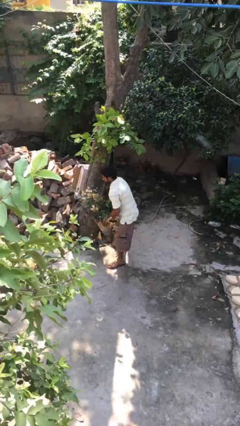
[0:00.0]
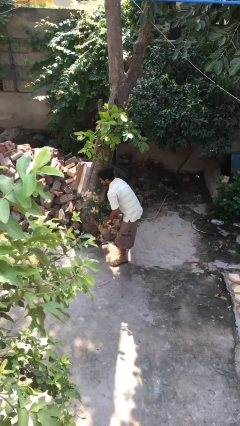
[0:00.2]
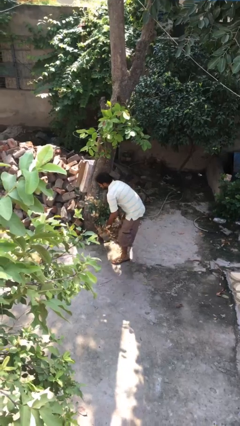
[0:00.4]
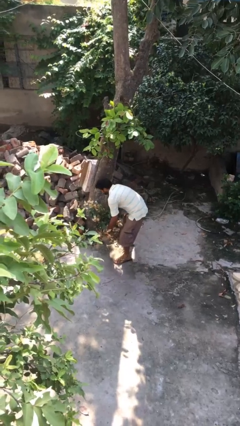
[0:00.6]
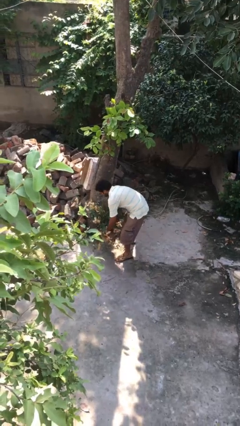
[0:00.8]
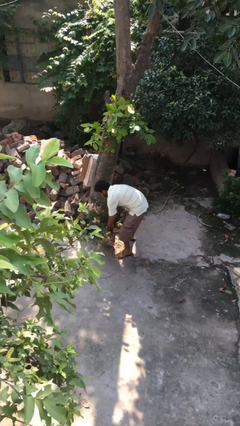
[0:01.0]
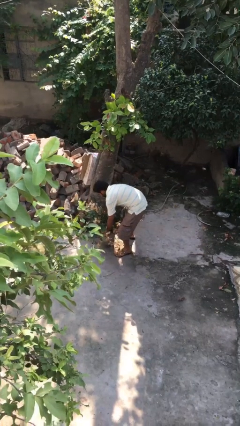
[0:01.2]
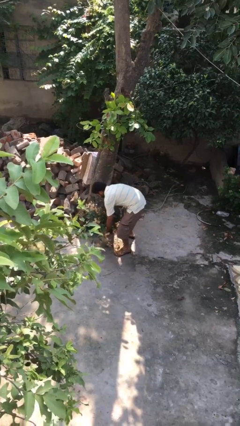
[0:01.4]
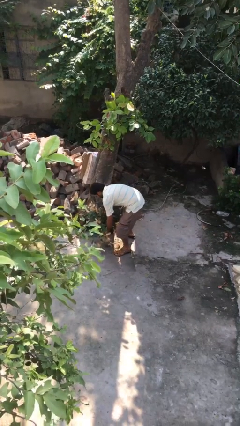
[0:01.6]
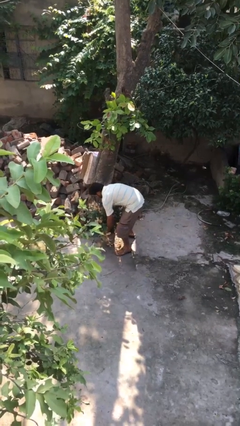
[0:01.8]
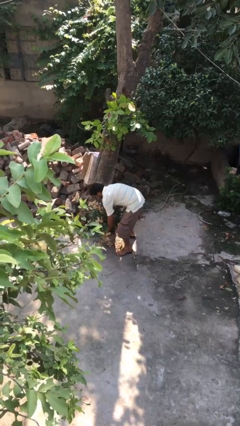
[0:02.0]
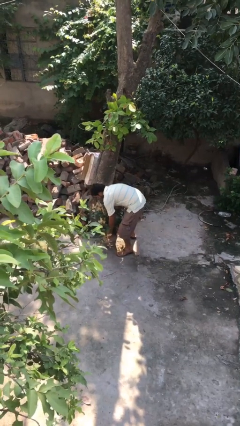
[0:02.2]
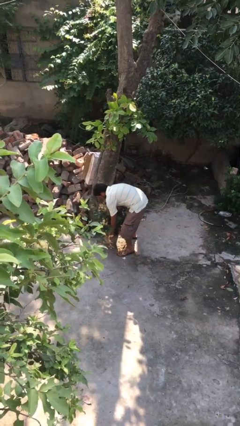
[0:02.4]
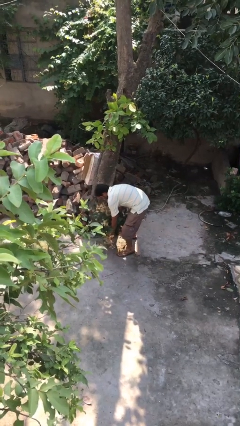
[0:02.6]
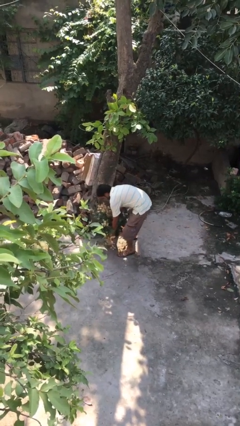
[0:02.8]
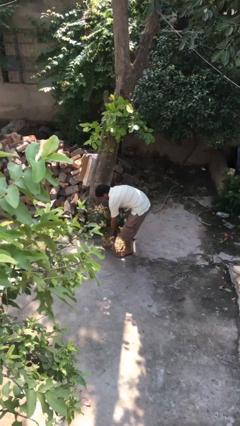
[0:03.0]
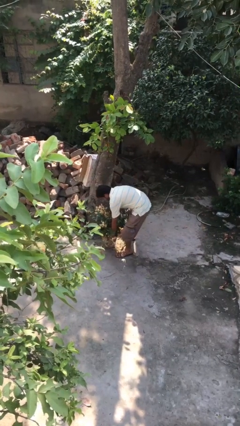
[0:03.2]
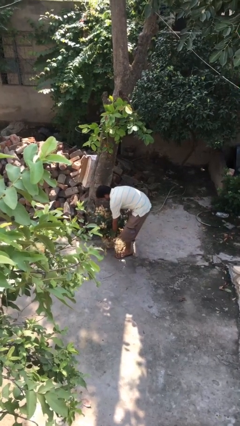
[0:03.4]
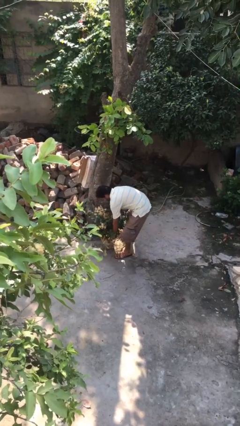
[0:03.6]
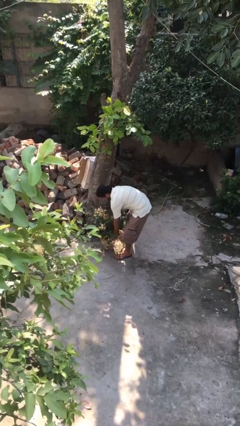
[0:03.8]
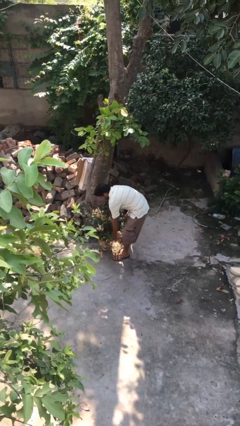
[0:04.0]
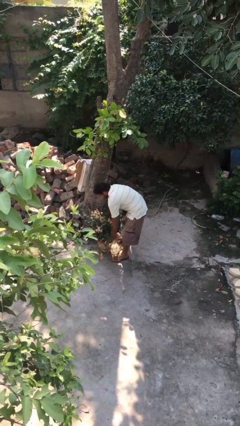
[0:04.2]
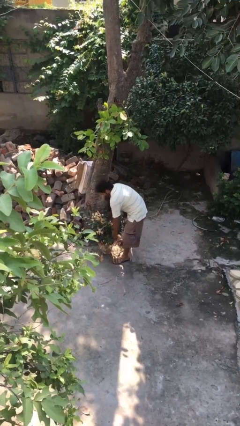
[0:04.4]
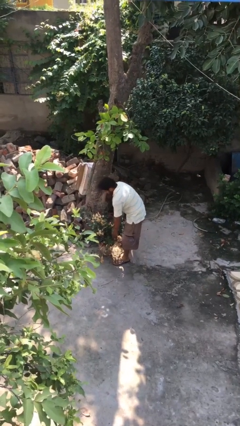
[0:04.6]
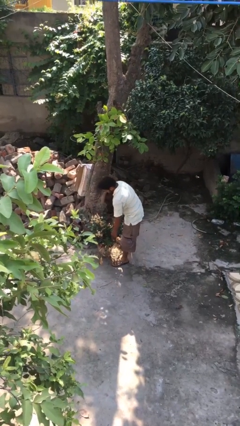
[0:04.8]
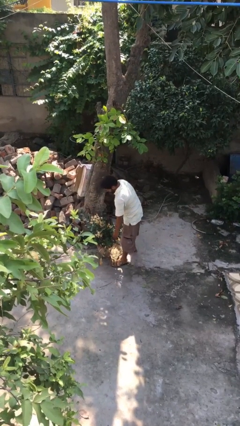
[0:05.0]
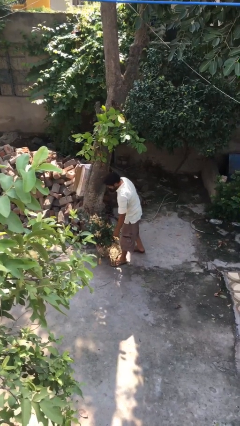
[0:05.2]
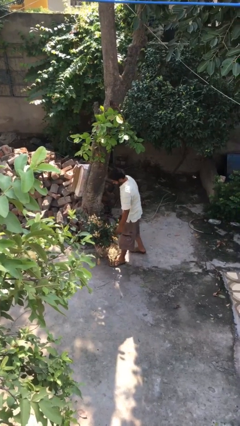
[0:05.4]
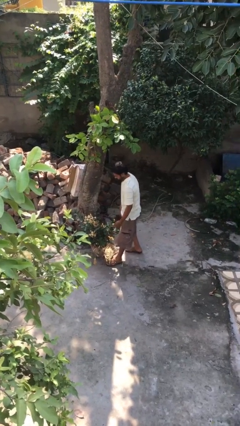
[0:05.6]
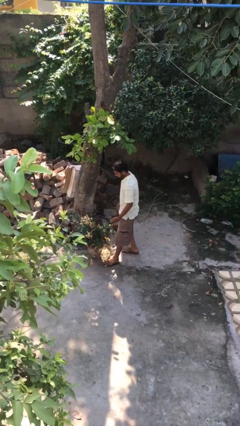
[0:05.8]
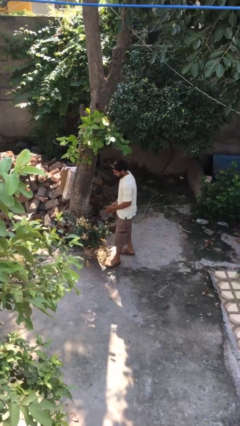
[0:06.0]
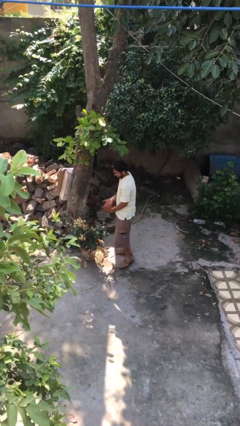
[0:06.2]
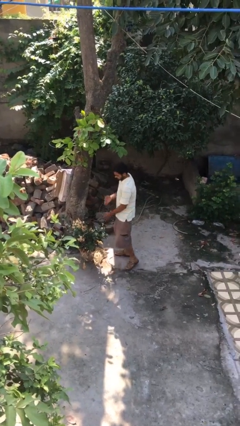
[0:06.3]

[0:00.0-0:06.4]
person puts down object on floor

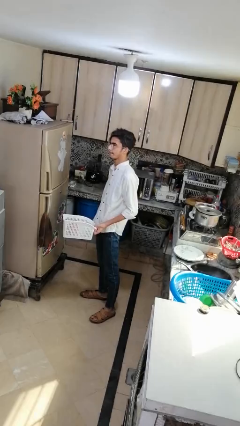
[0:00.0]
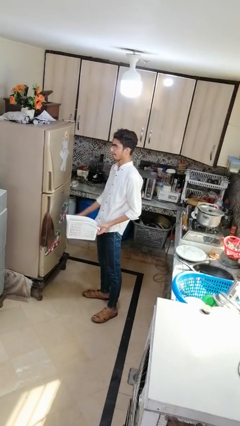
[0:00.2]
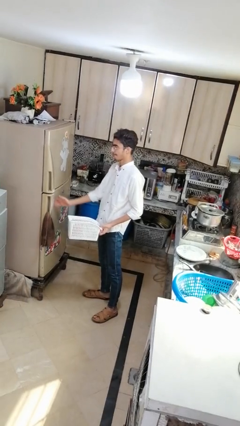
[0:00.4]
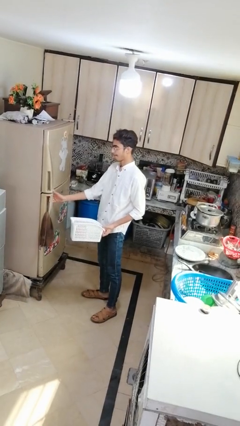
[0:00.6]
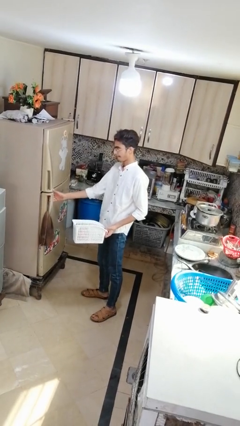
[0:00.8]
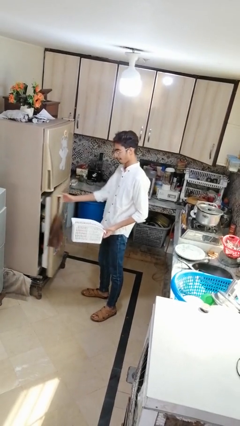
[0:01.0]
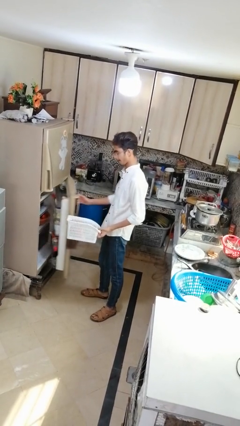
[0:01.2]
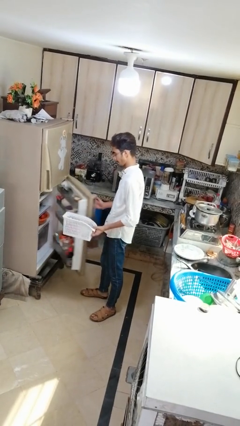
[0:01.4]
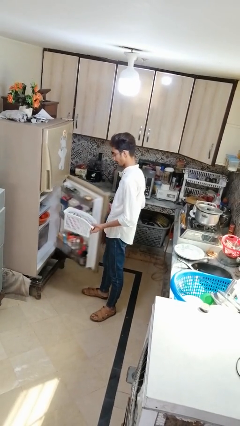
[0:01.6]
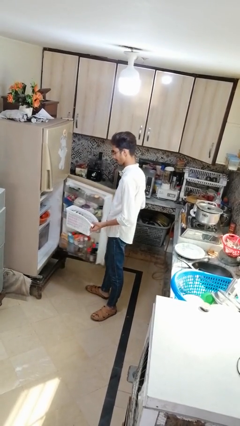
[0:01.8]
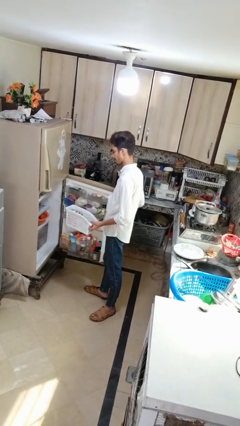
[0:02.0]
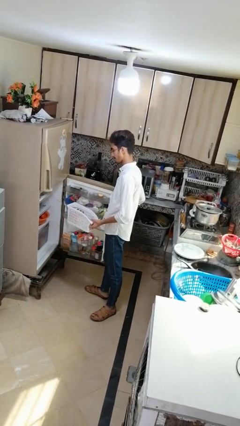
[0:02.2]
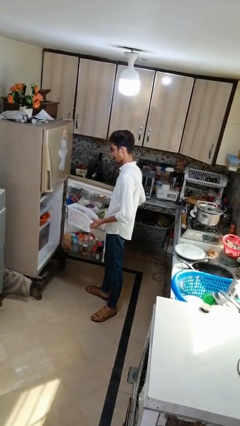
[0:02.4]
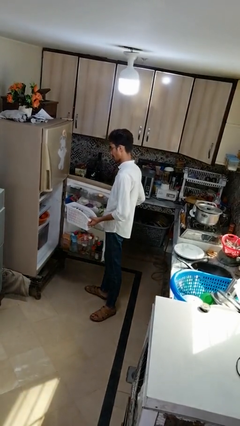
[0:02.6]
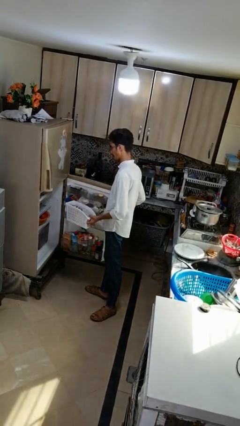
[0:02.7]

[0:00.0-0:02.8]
person opens refrigerator

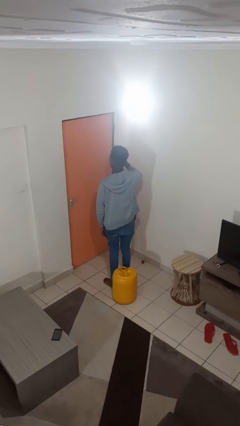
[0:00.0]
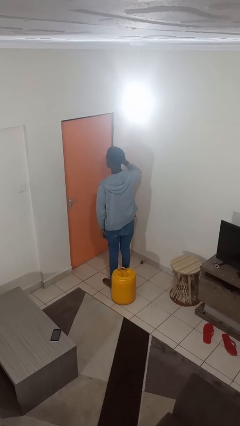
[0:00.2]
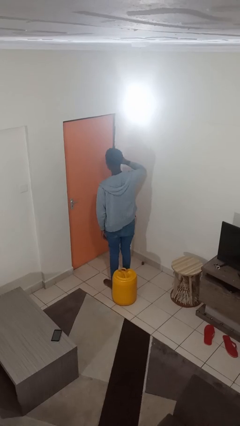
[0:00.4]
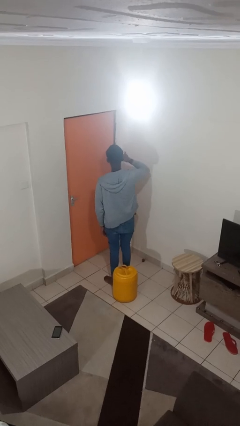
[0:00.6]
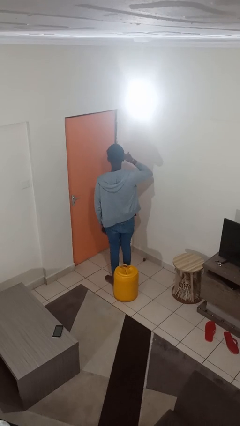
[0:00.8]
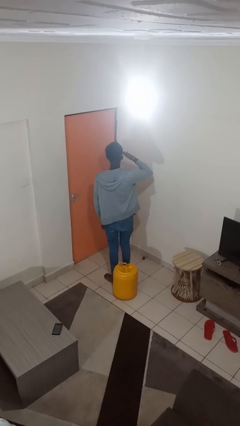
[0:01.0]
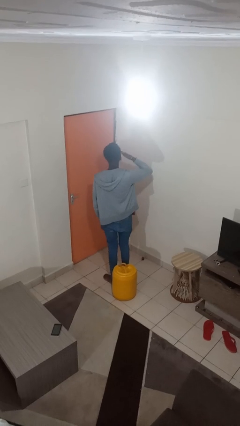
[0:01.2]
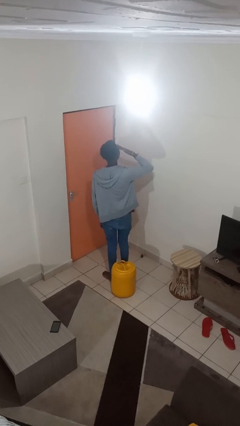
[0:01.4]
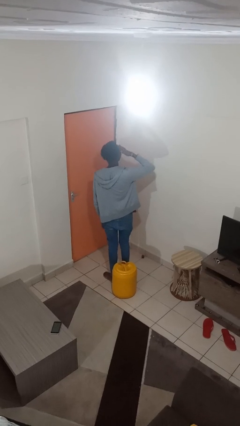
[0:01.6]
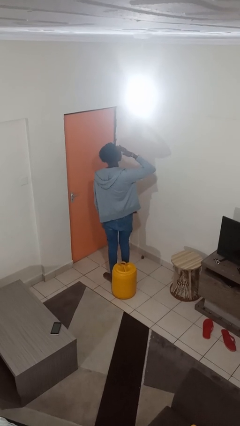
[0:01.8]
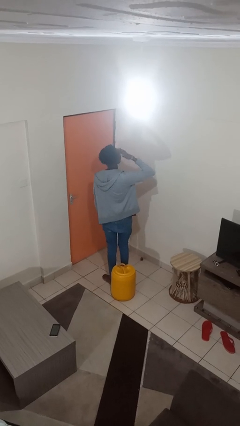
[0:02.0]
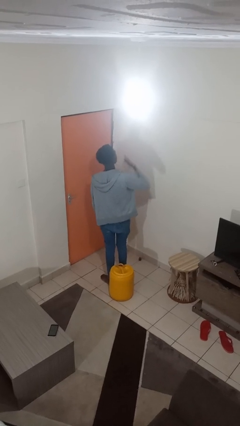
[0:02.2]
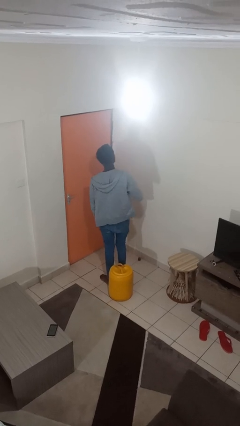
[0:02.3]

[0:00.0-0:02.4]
person rubs eyes

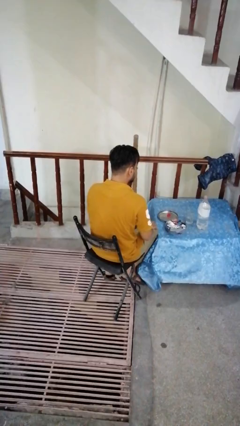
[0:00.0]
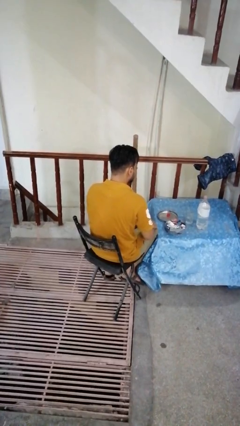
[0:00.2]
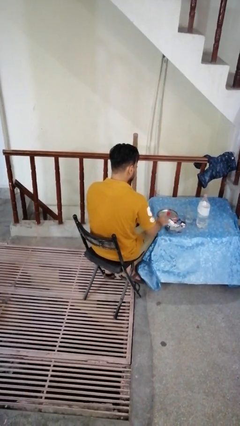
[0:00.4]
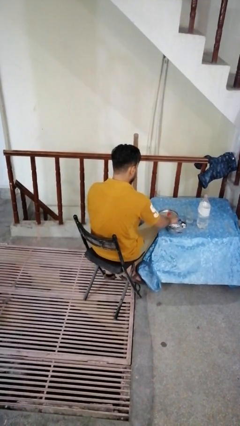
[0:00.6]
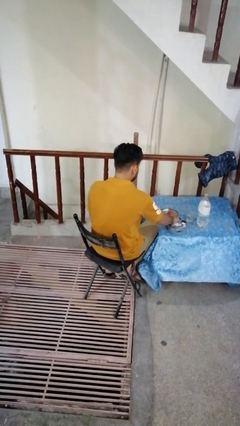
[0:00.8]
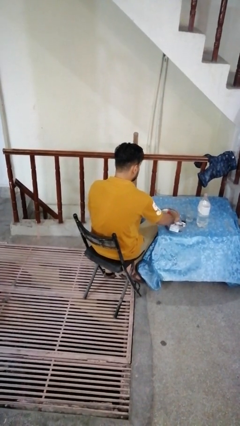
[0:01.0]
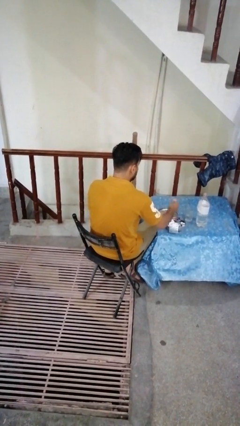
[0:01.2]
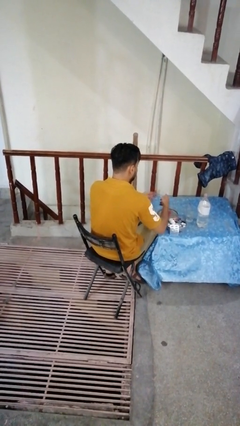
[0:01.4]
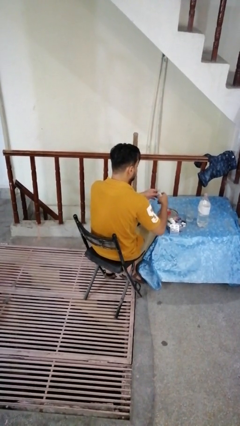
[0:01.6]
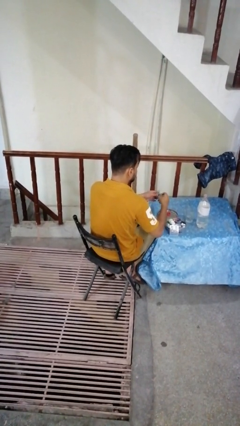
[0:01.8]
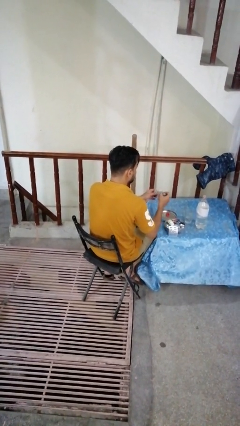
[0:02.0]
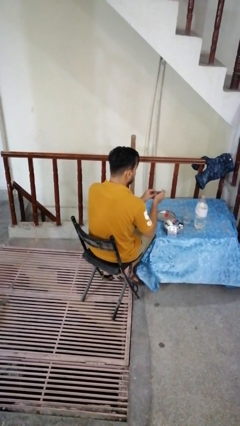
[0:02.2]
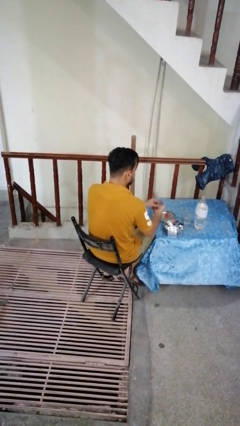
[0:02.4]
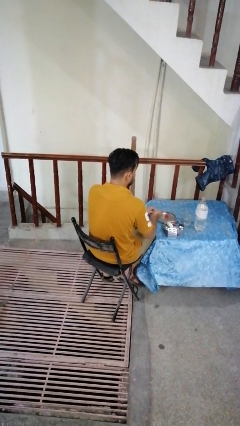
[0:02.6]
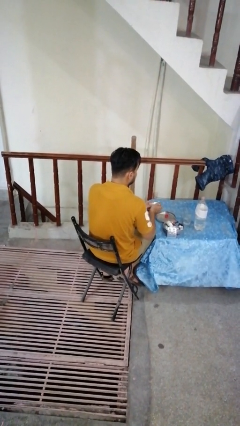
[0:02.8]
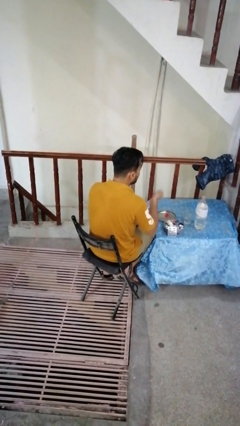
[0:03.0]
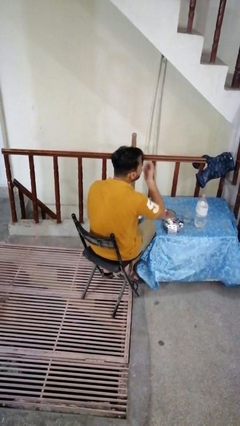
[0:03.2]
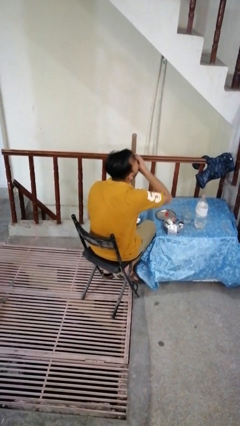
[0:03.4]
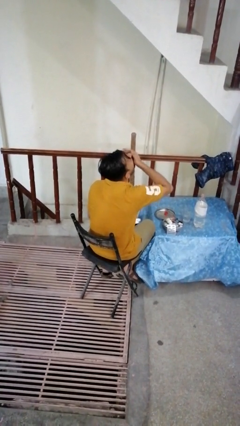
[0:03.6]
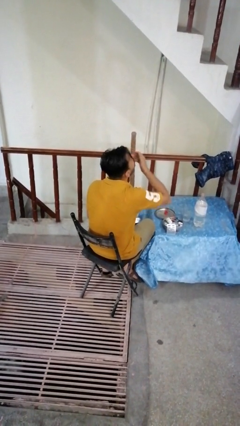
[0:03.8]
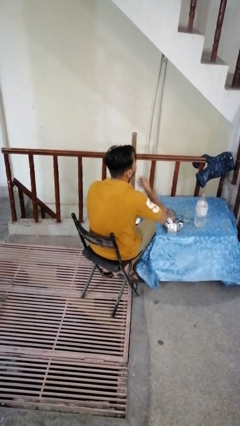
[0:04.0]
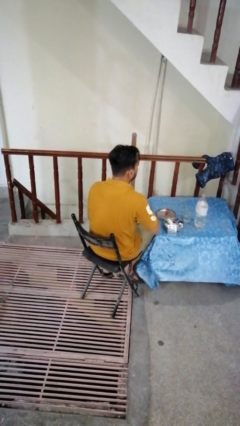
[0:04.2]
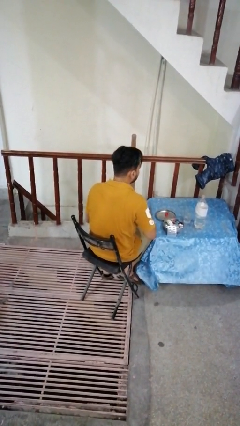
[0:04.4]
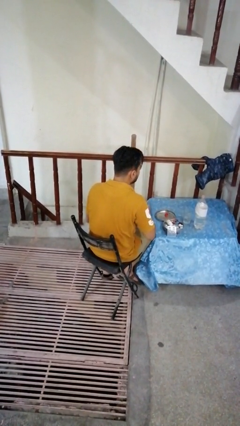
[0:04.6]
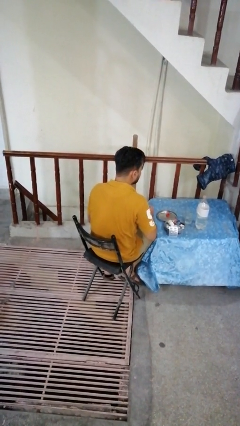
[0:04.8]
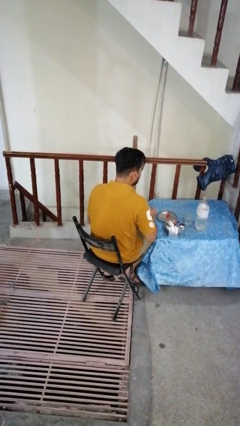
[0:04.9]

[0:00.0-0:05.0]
person takes medicine pills

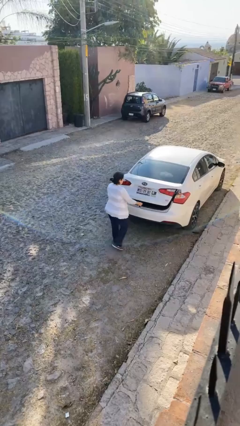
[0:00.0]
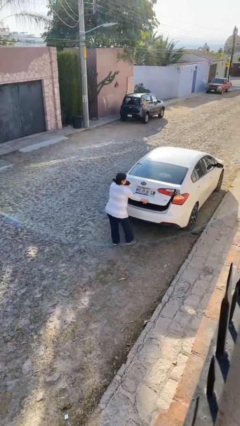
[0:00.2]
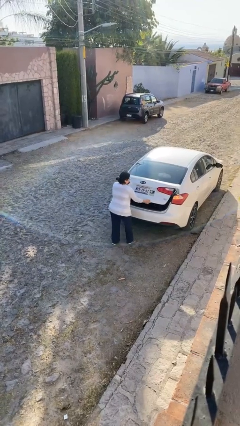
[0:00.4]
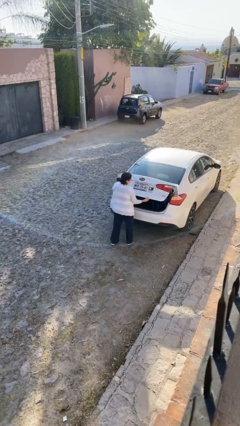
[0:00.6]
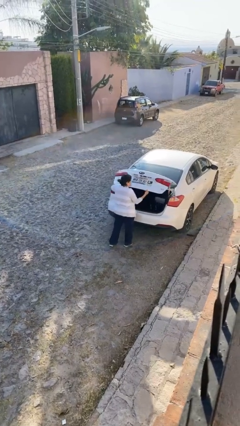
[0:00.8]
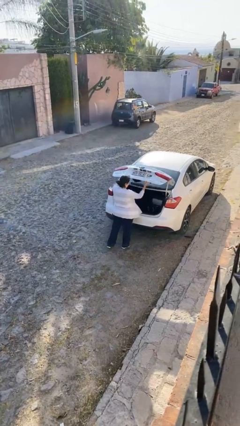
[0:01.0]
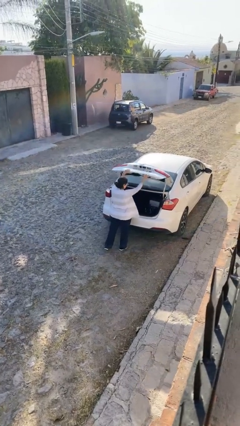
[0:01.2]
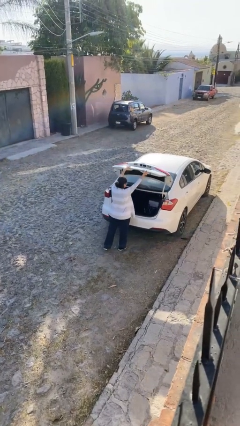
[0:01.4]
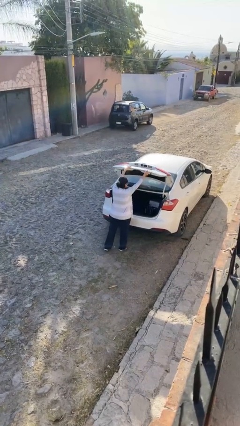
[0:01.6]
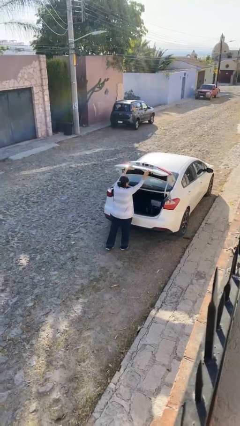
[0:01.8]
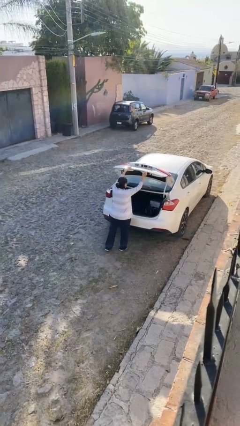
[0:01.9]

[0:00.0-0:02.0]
person opens car trunk
